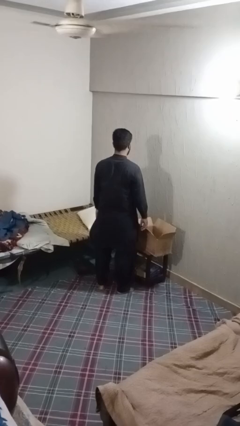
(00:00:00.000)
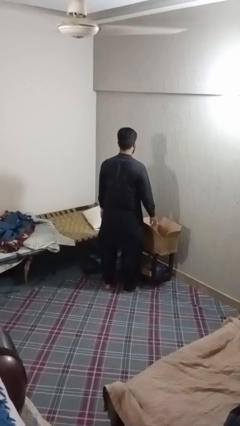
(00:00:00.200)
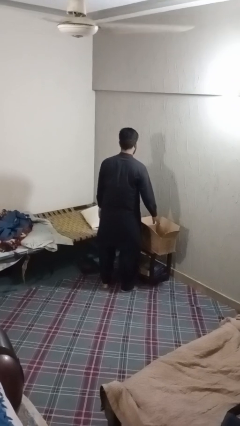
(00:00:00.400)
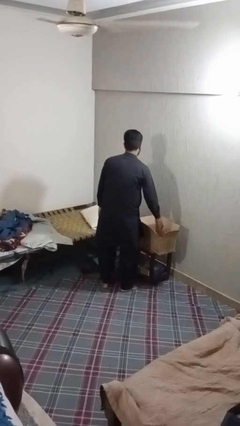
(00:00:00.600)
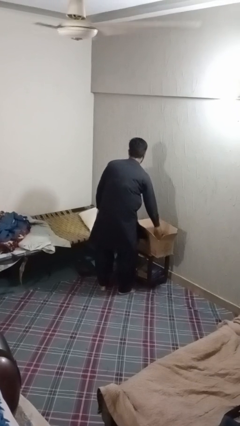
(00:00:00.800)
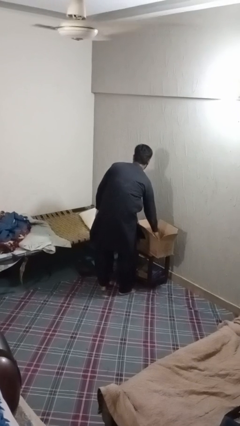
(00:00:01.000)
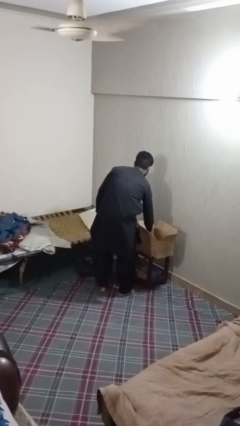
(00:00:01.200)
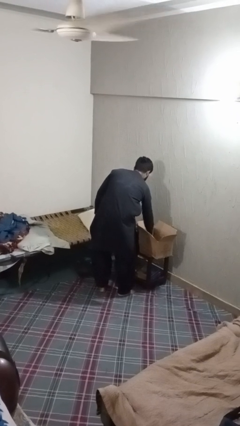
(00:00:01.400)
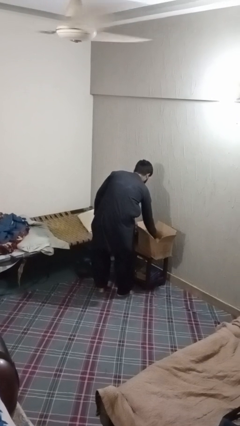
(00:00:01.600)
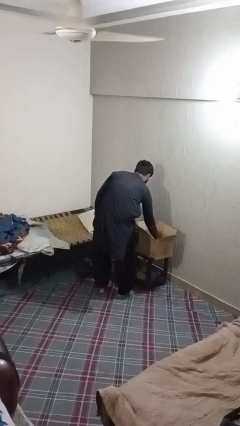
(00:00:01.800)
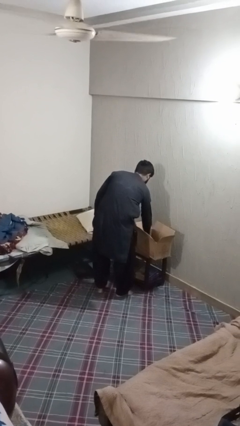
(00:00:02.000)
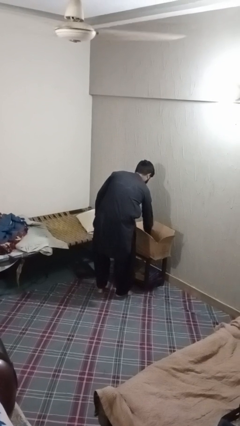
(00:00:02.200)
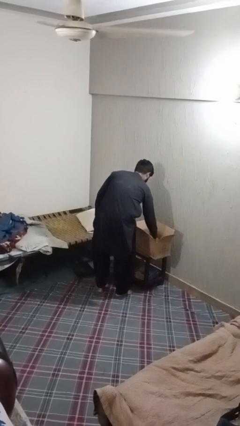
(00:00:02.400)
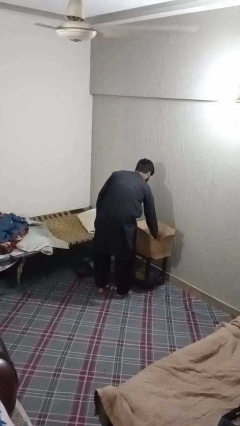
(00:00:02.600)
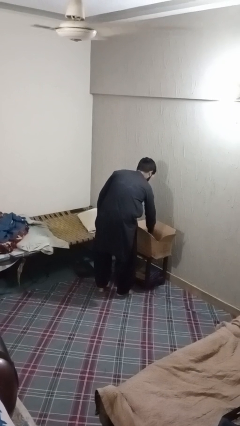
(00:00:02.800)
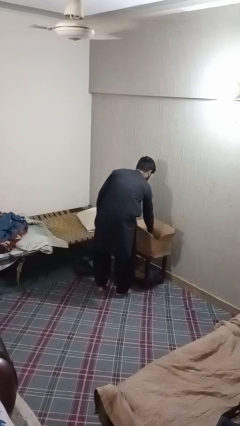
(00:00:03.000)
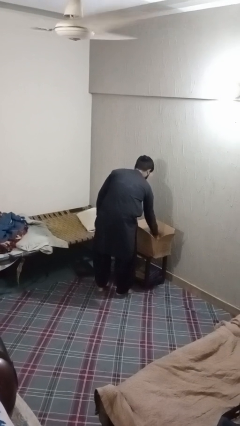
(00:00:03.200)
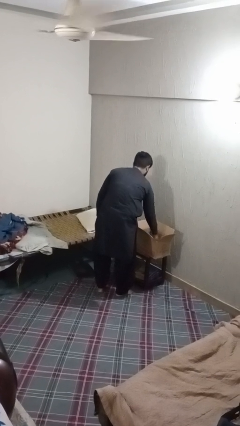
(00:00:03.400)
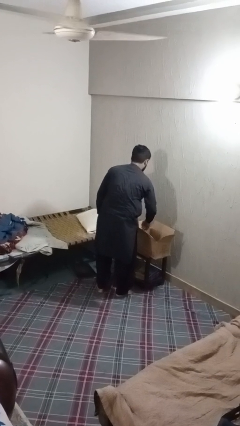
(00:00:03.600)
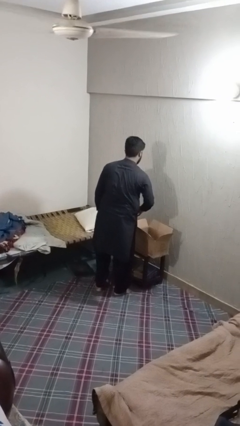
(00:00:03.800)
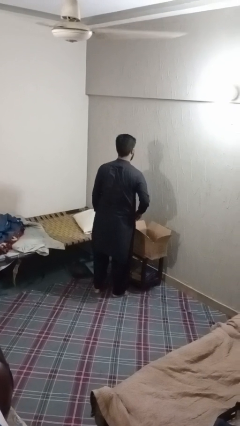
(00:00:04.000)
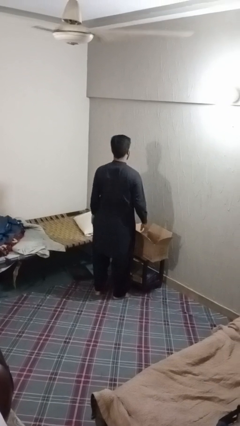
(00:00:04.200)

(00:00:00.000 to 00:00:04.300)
person searches in box

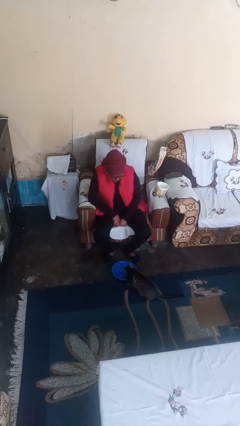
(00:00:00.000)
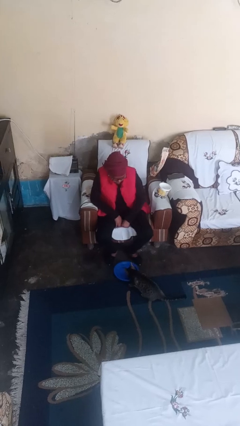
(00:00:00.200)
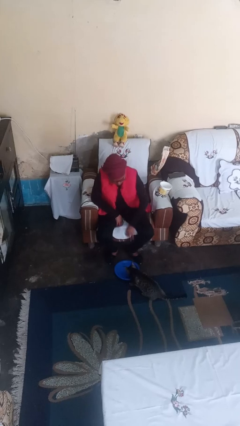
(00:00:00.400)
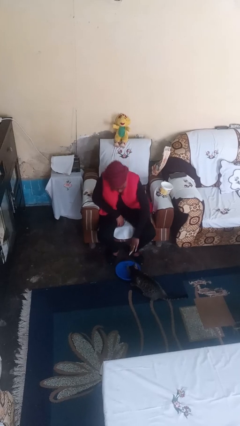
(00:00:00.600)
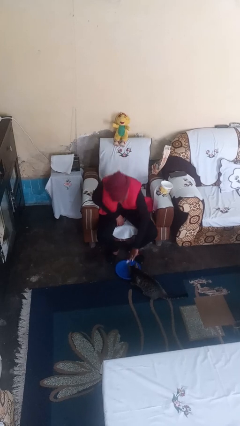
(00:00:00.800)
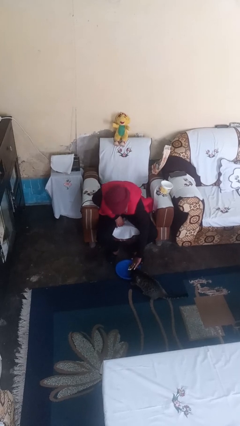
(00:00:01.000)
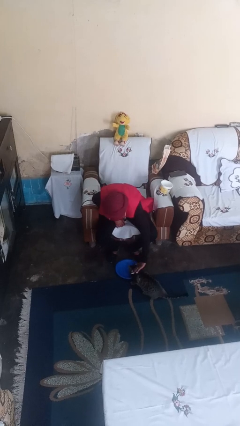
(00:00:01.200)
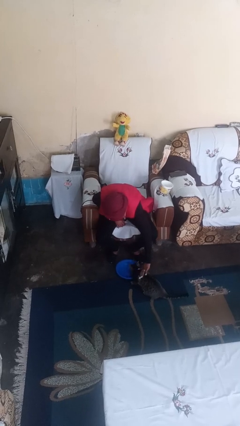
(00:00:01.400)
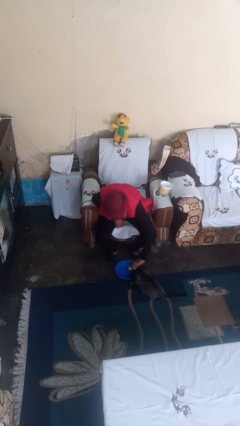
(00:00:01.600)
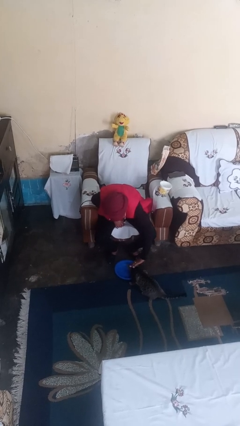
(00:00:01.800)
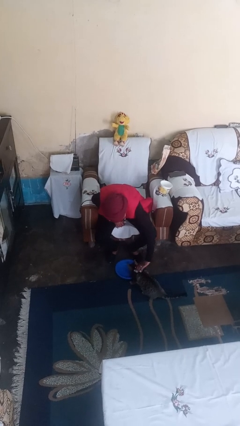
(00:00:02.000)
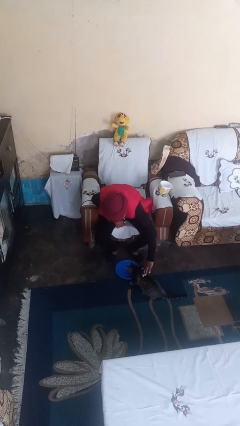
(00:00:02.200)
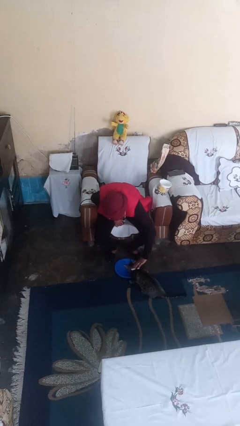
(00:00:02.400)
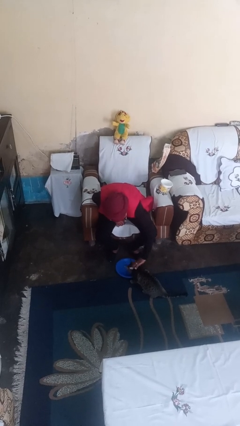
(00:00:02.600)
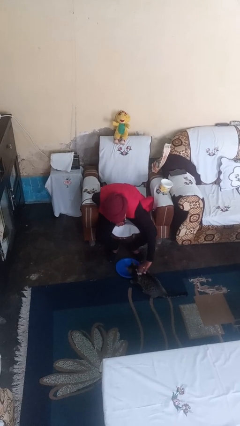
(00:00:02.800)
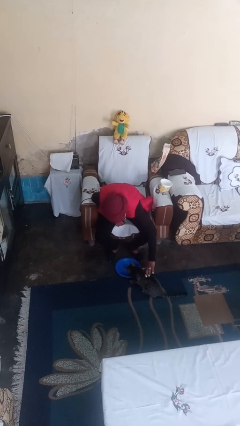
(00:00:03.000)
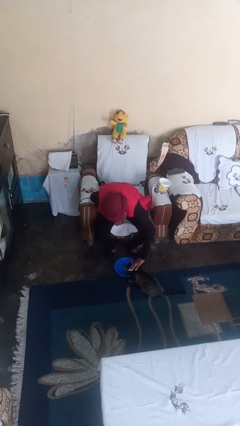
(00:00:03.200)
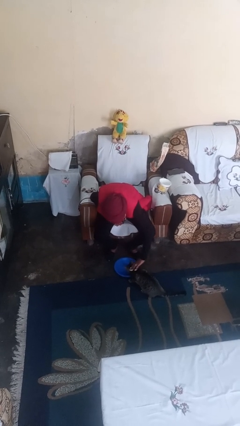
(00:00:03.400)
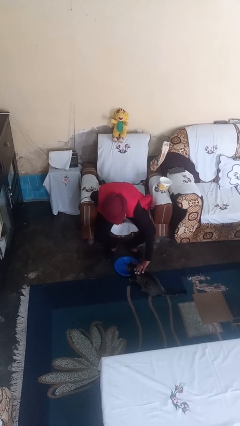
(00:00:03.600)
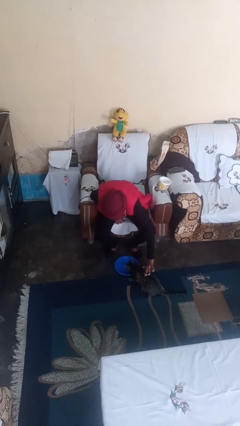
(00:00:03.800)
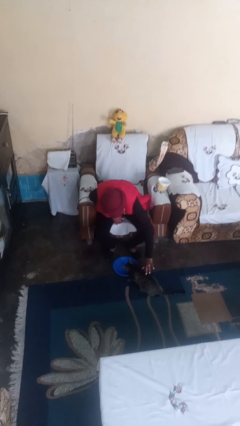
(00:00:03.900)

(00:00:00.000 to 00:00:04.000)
person pets cat

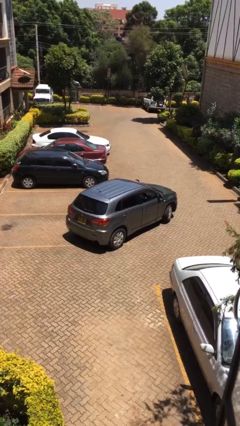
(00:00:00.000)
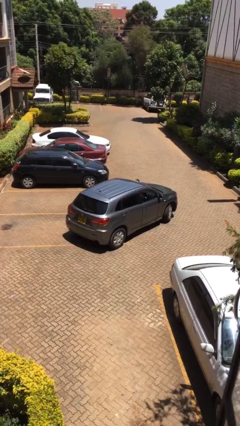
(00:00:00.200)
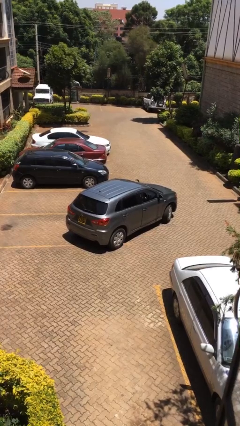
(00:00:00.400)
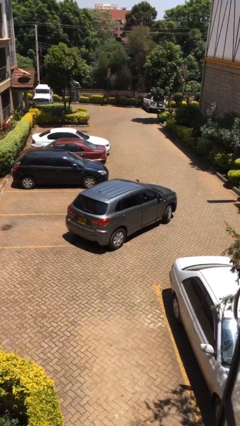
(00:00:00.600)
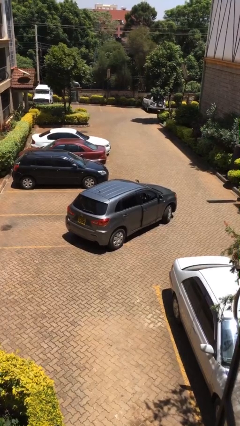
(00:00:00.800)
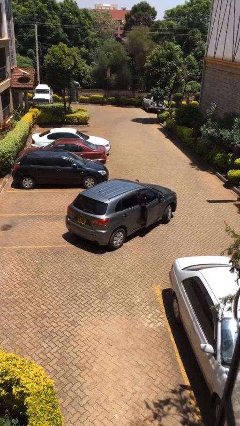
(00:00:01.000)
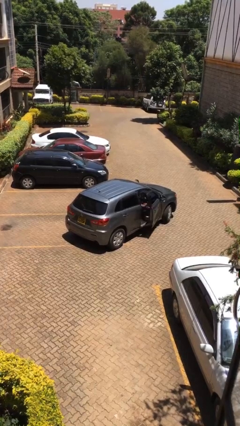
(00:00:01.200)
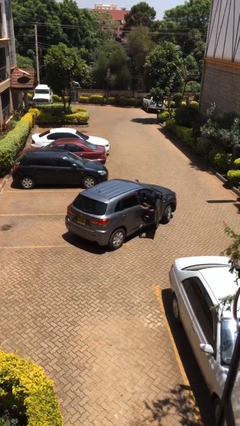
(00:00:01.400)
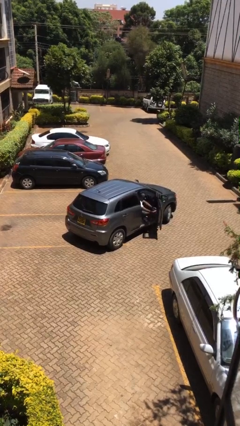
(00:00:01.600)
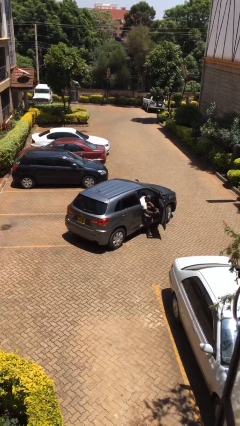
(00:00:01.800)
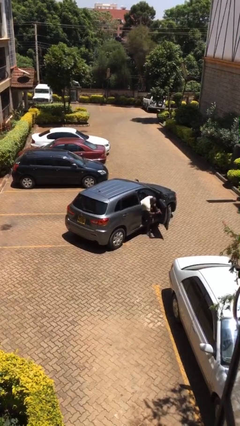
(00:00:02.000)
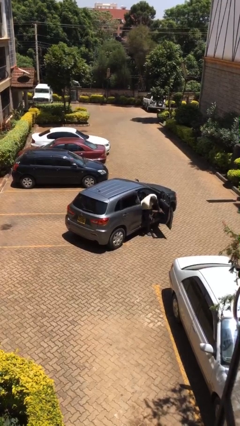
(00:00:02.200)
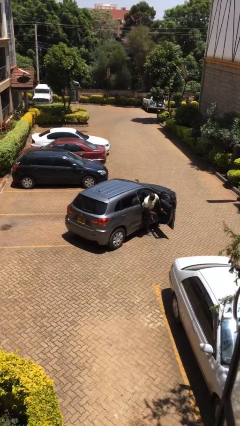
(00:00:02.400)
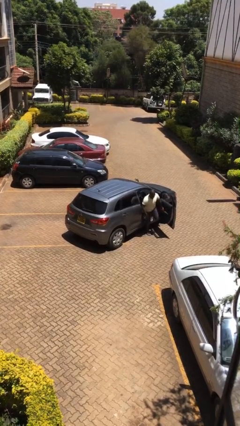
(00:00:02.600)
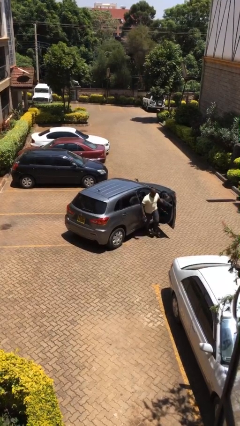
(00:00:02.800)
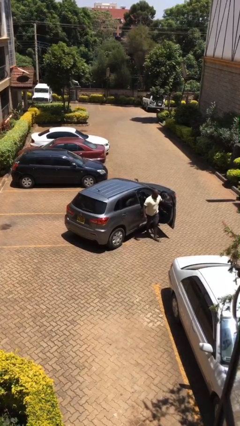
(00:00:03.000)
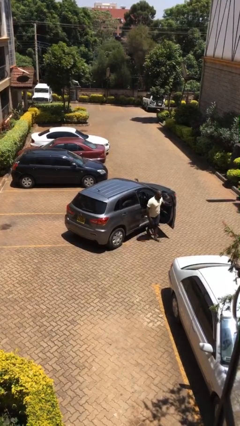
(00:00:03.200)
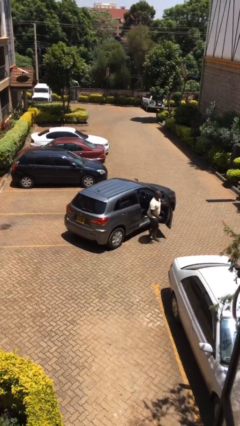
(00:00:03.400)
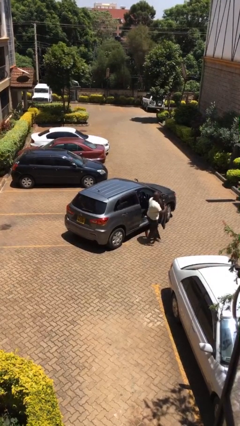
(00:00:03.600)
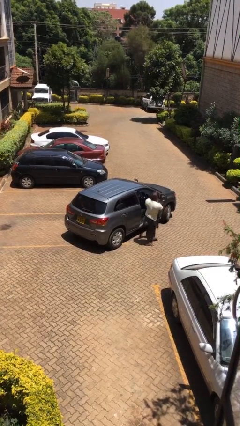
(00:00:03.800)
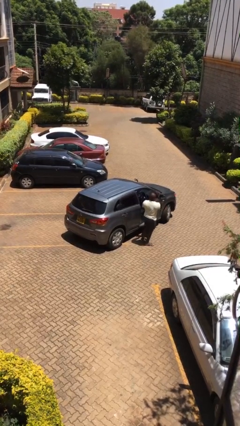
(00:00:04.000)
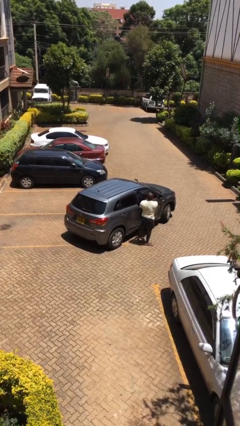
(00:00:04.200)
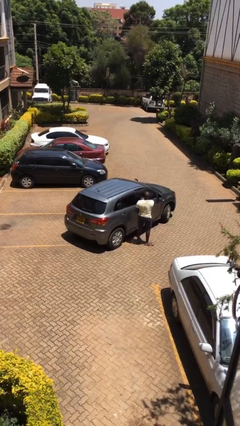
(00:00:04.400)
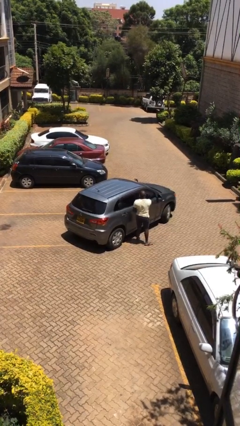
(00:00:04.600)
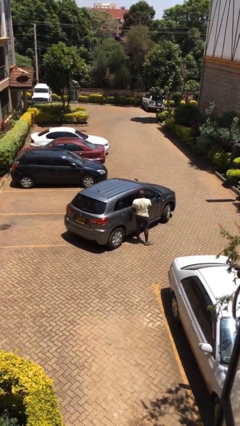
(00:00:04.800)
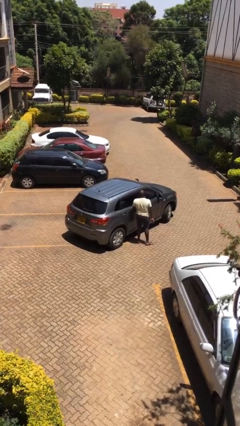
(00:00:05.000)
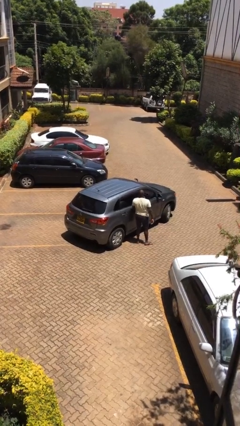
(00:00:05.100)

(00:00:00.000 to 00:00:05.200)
car drops off person

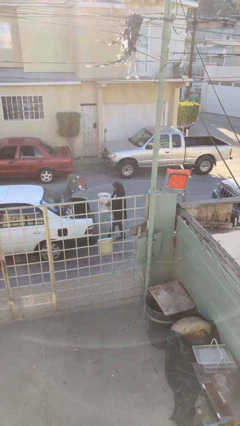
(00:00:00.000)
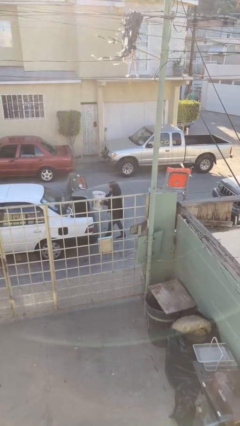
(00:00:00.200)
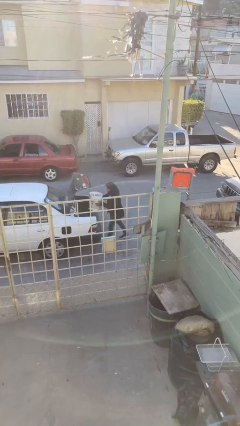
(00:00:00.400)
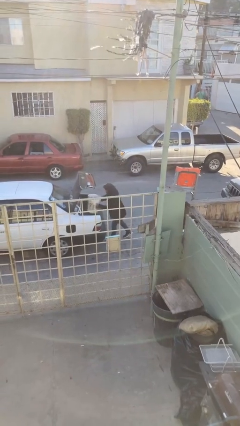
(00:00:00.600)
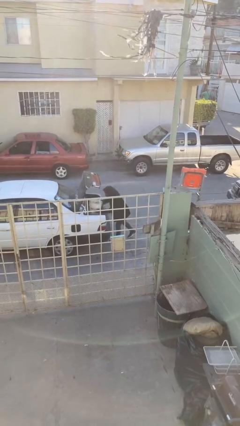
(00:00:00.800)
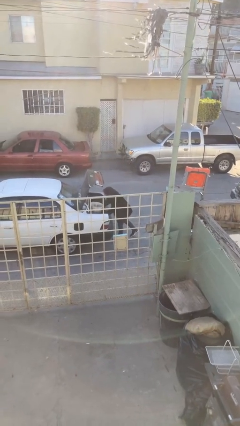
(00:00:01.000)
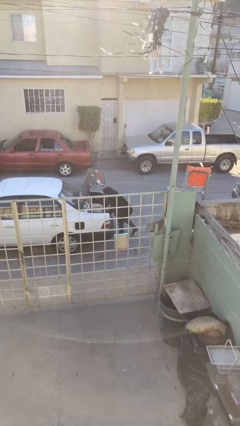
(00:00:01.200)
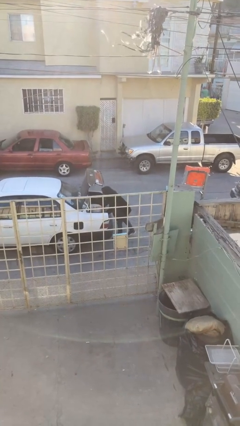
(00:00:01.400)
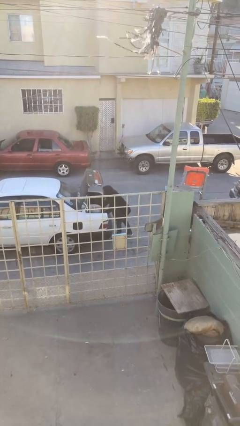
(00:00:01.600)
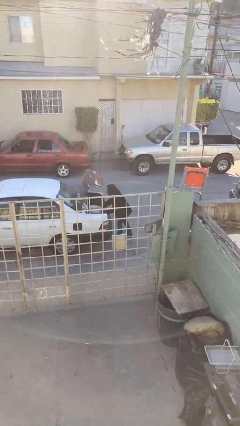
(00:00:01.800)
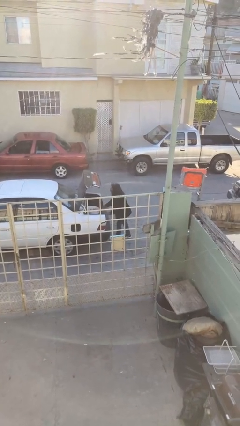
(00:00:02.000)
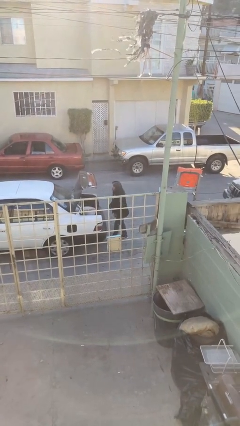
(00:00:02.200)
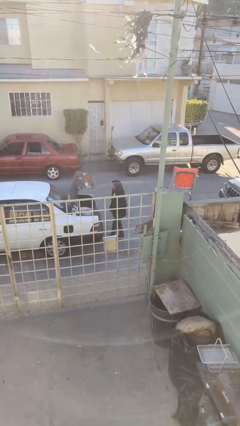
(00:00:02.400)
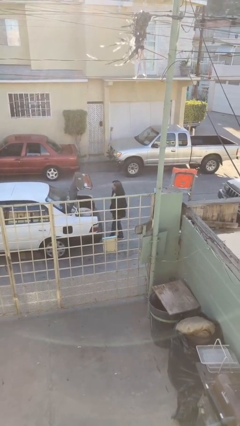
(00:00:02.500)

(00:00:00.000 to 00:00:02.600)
person loads car

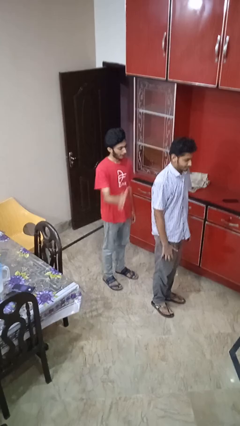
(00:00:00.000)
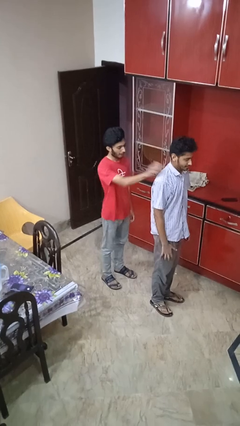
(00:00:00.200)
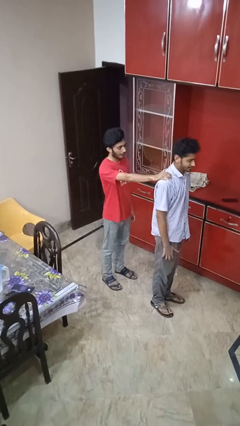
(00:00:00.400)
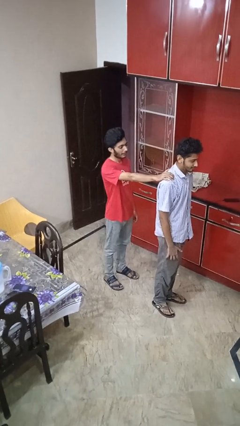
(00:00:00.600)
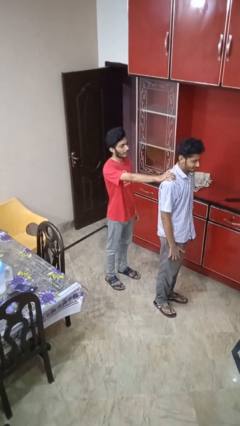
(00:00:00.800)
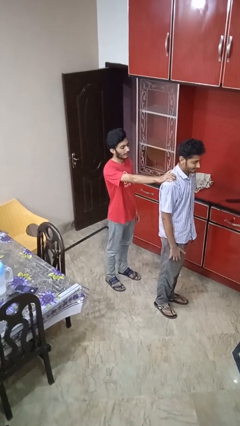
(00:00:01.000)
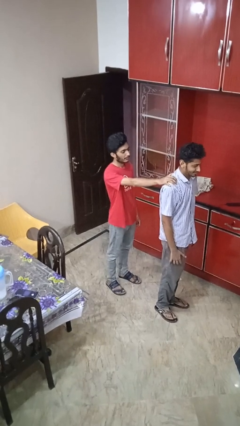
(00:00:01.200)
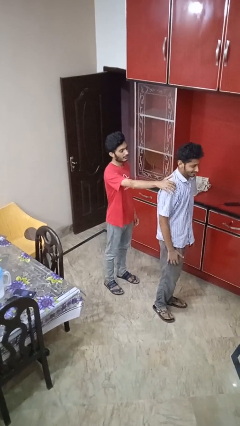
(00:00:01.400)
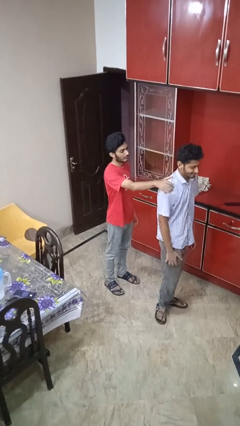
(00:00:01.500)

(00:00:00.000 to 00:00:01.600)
person grabs person by shoulder
